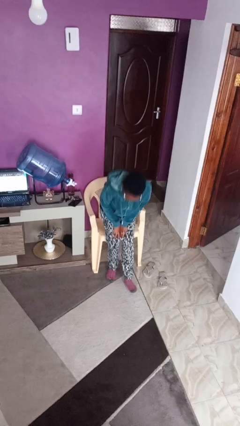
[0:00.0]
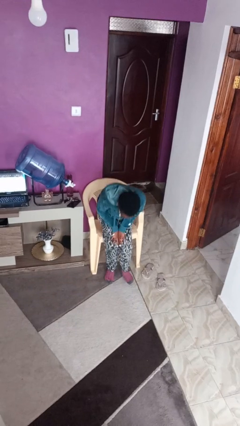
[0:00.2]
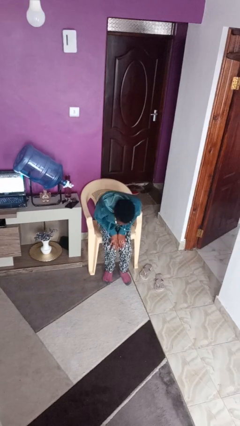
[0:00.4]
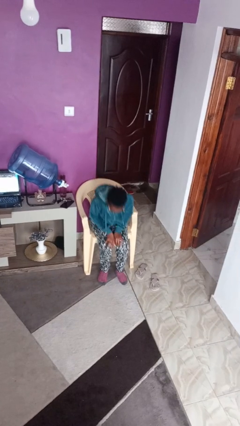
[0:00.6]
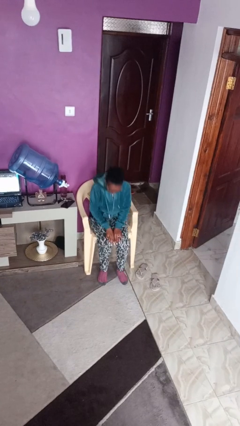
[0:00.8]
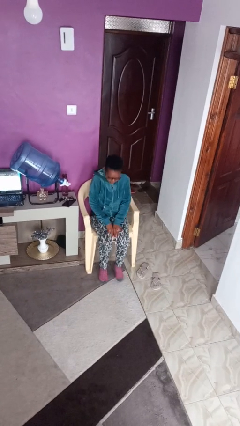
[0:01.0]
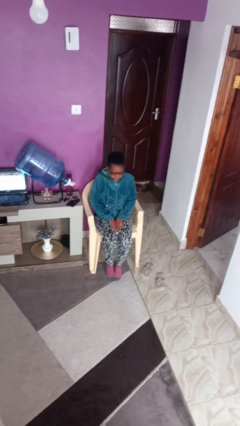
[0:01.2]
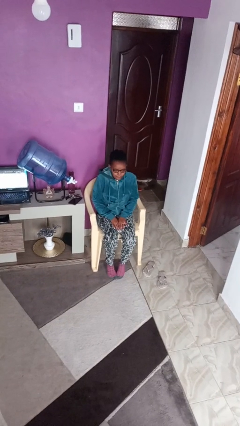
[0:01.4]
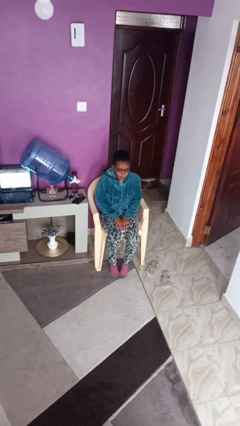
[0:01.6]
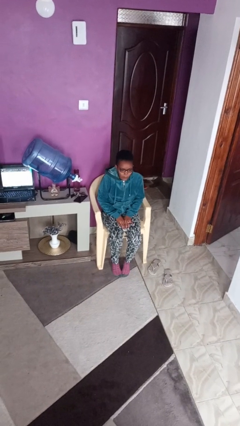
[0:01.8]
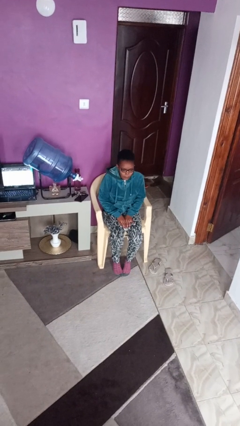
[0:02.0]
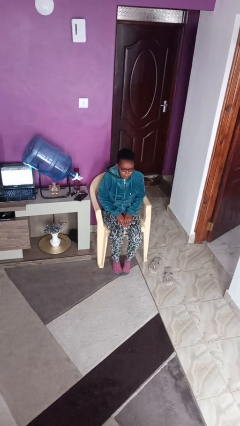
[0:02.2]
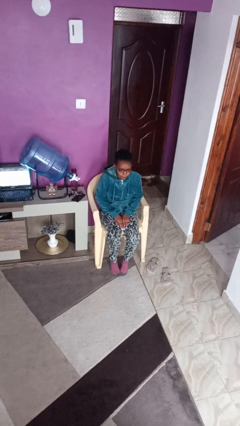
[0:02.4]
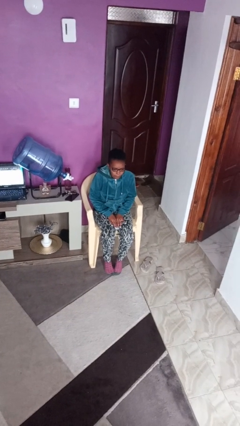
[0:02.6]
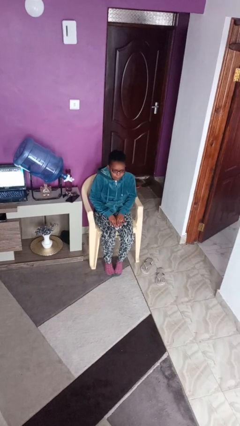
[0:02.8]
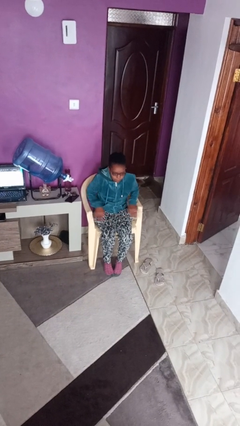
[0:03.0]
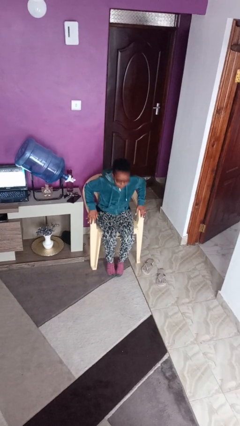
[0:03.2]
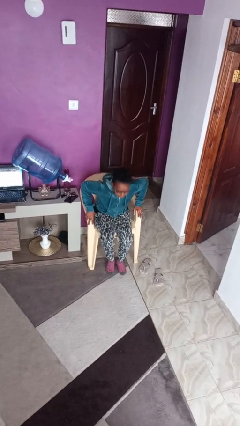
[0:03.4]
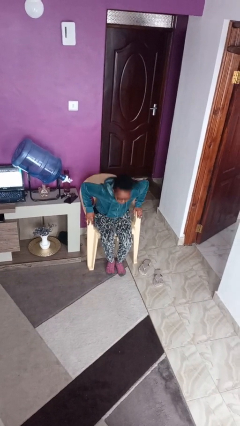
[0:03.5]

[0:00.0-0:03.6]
person sits down

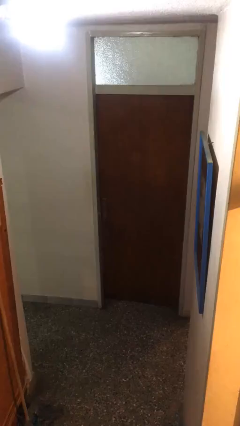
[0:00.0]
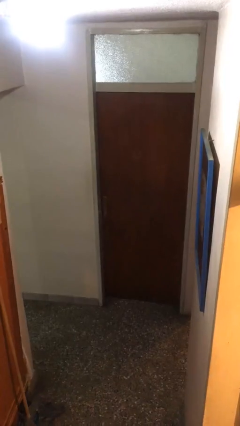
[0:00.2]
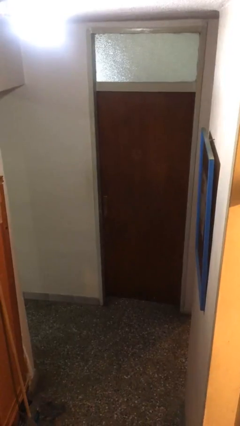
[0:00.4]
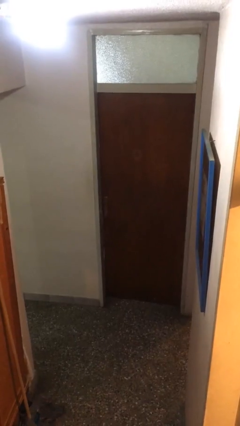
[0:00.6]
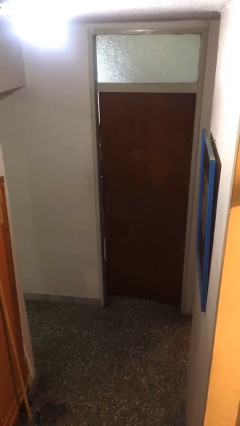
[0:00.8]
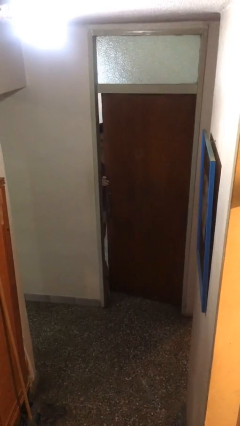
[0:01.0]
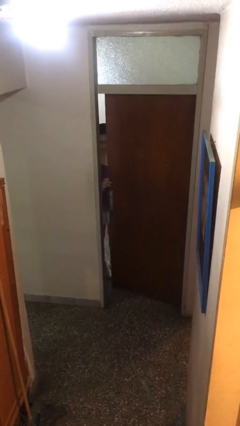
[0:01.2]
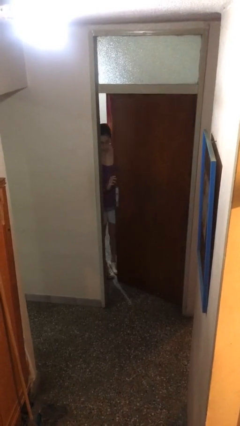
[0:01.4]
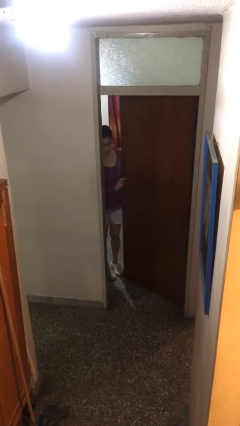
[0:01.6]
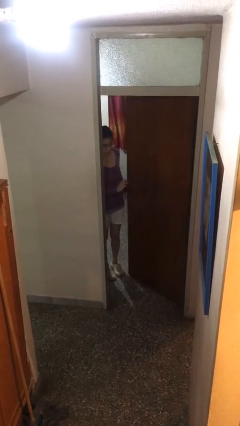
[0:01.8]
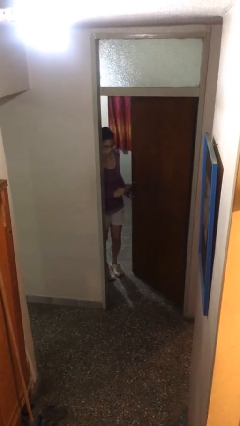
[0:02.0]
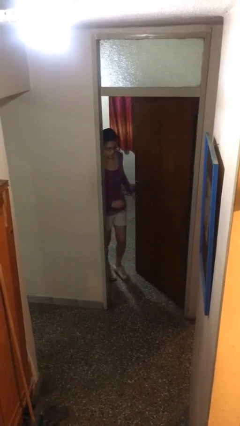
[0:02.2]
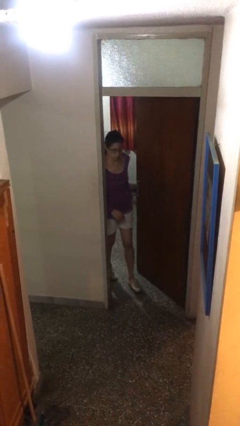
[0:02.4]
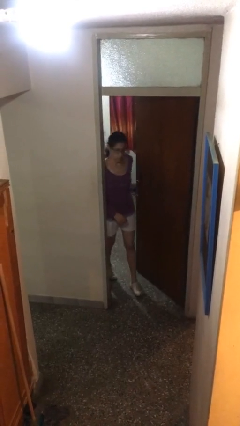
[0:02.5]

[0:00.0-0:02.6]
person opens facility door

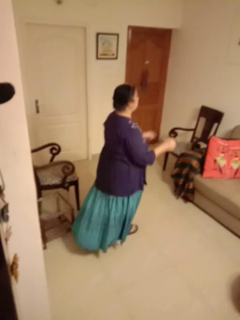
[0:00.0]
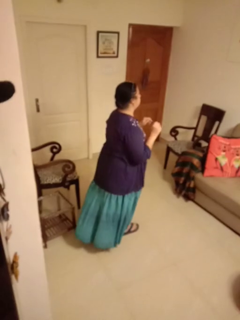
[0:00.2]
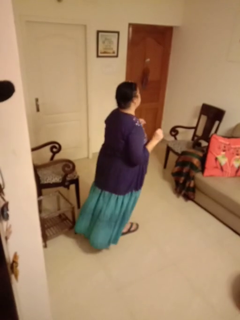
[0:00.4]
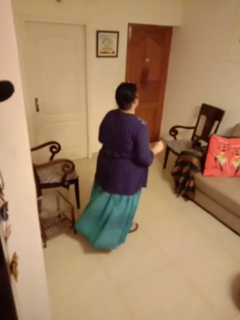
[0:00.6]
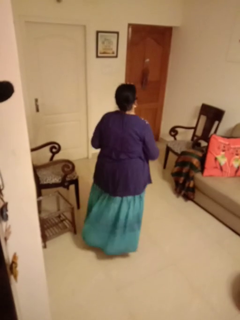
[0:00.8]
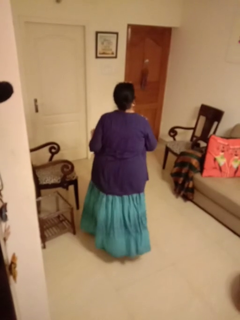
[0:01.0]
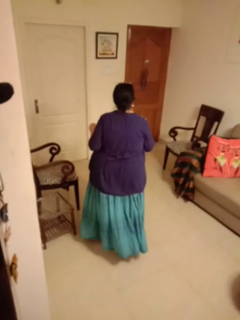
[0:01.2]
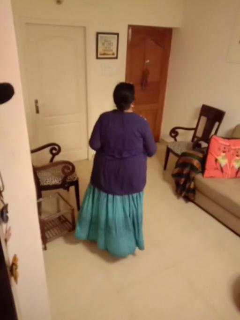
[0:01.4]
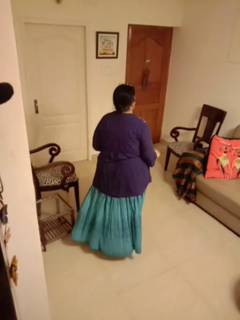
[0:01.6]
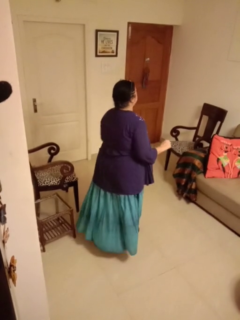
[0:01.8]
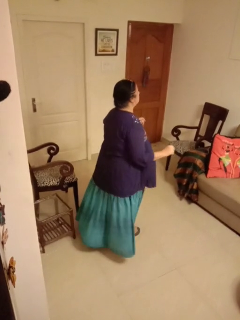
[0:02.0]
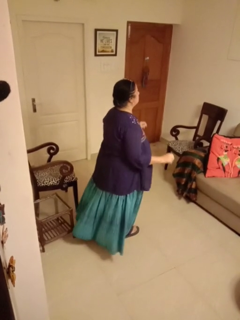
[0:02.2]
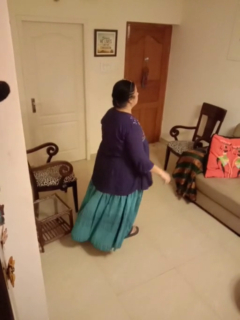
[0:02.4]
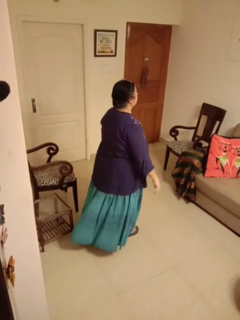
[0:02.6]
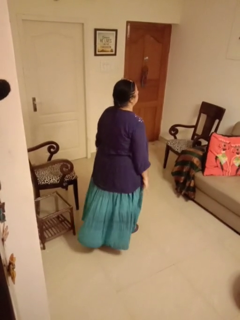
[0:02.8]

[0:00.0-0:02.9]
person dances in place

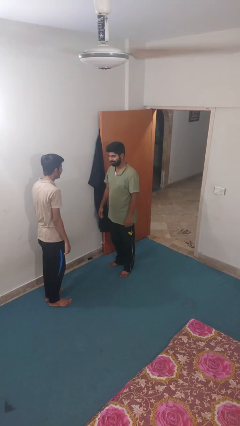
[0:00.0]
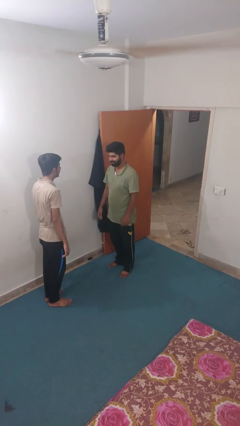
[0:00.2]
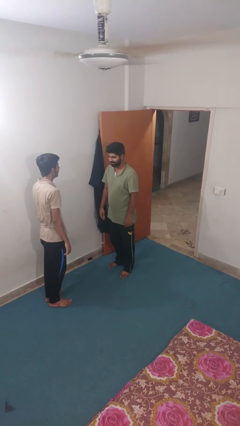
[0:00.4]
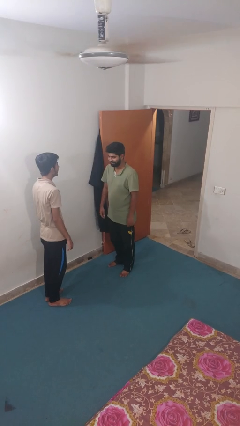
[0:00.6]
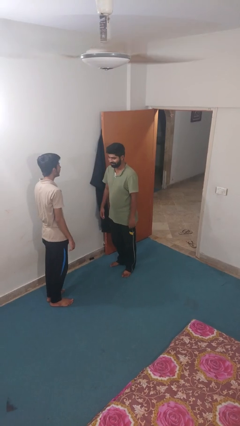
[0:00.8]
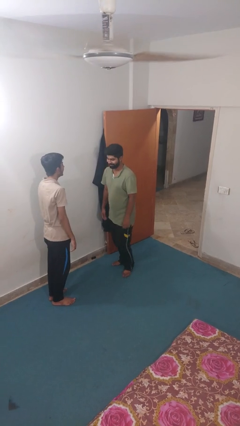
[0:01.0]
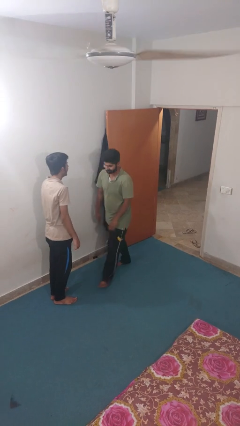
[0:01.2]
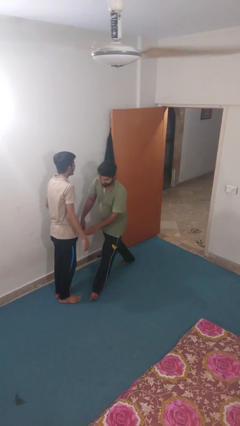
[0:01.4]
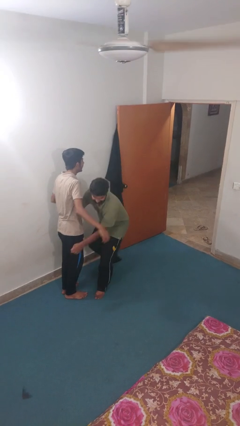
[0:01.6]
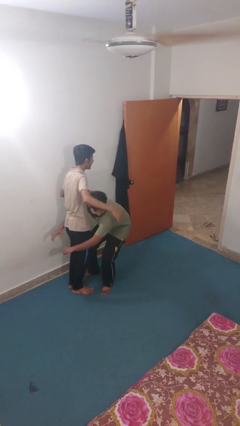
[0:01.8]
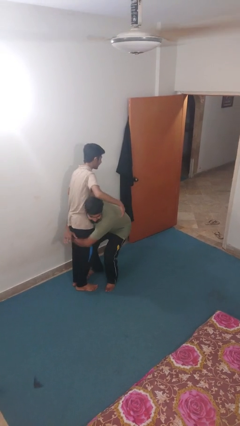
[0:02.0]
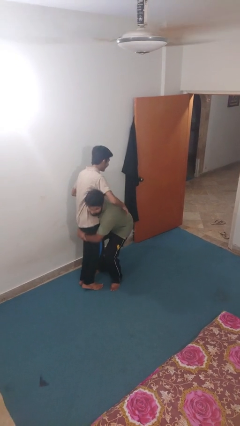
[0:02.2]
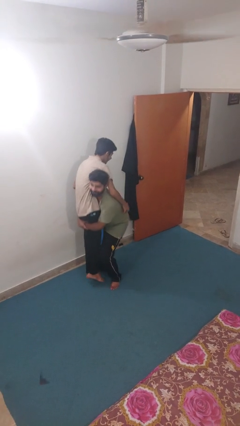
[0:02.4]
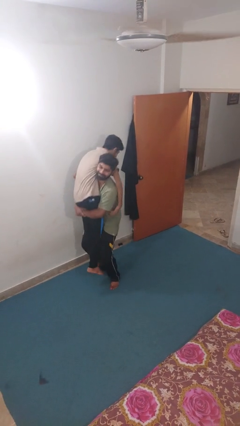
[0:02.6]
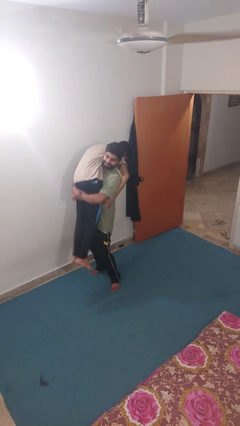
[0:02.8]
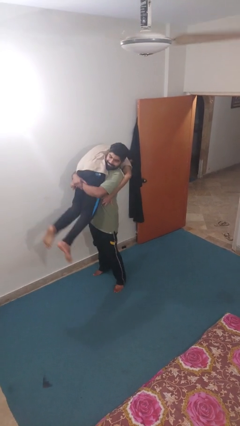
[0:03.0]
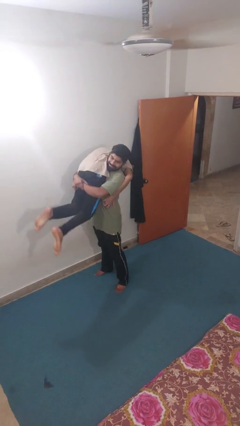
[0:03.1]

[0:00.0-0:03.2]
person carries person over shoulder

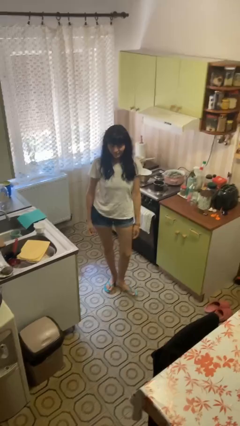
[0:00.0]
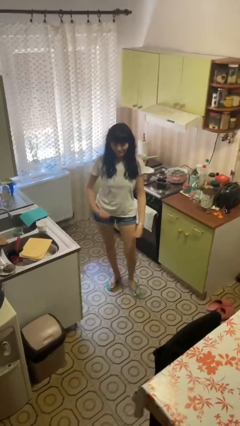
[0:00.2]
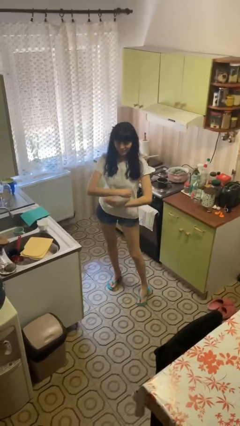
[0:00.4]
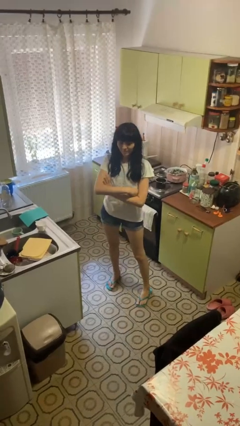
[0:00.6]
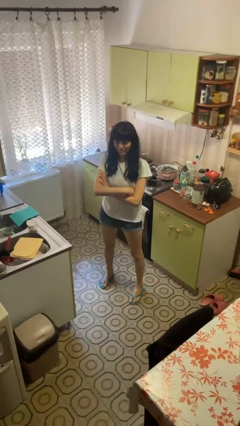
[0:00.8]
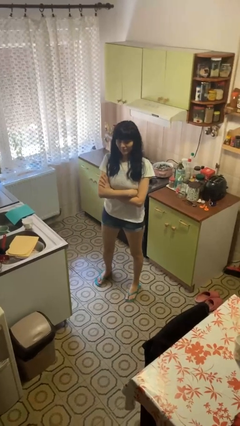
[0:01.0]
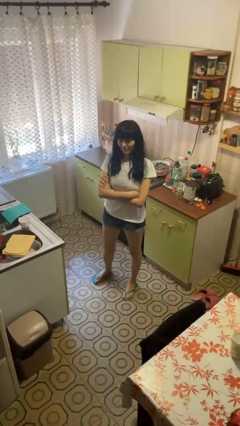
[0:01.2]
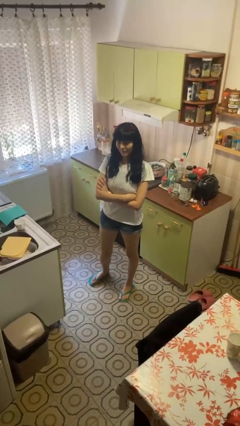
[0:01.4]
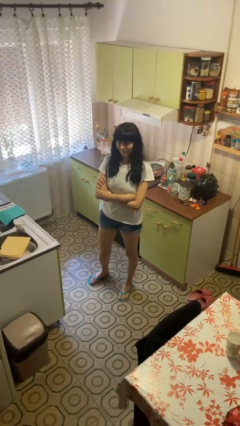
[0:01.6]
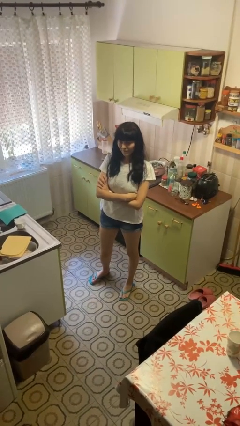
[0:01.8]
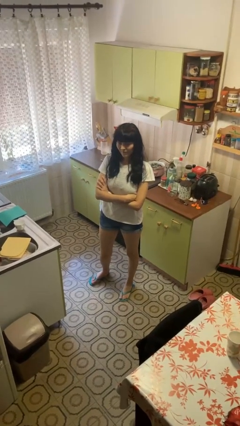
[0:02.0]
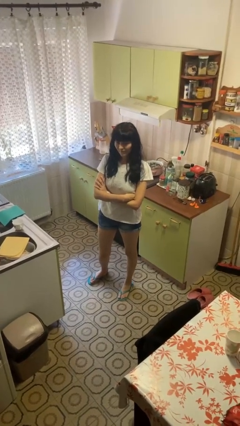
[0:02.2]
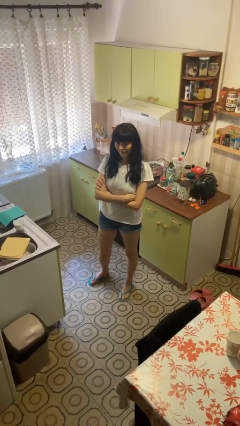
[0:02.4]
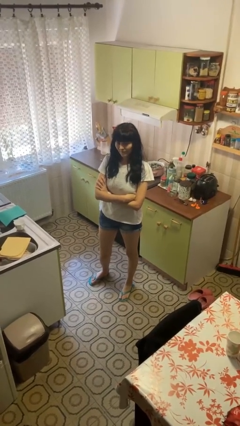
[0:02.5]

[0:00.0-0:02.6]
person crosses arms

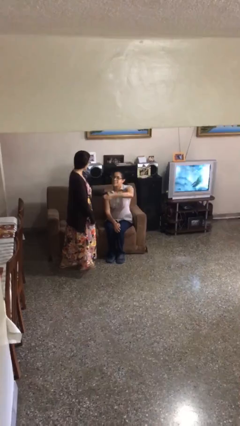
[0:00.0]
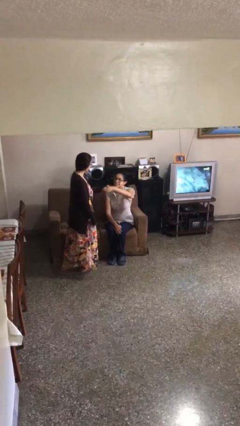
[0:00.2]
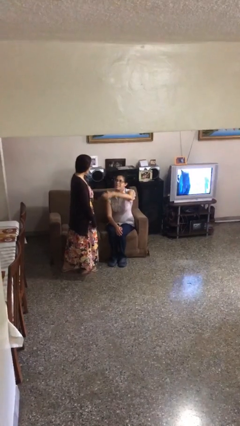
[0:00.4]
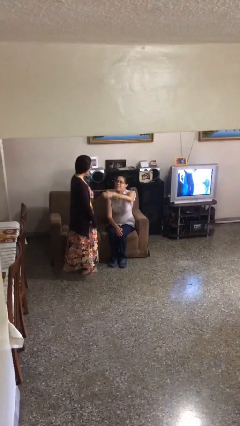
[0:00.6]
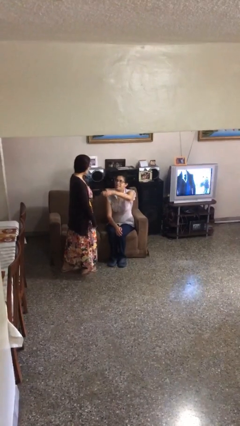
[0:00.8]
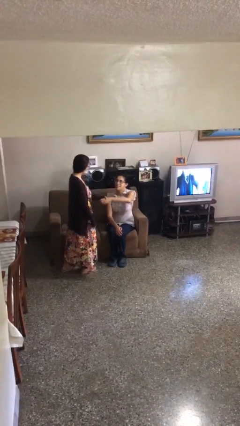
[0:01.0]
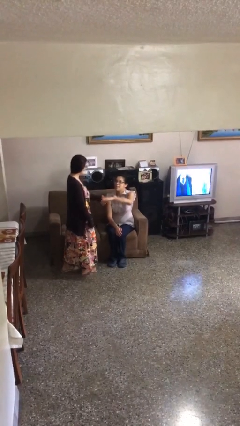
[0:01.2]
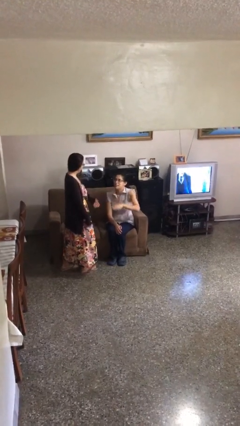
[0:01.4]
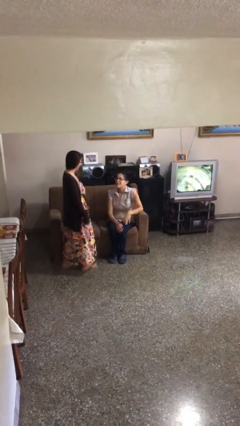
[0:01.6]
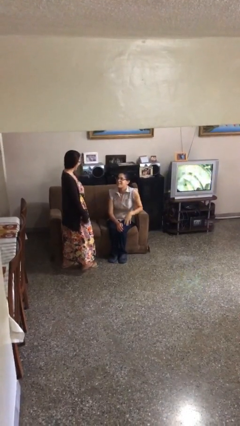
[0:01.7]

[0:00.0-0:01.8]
person shakes hand

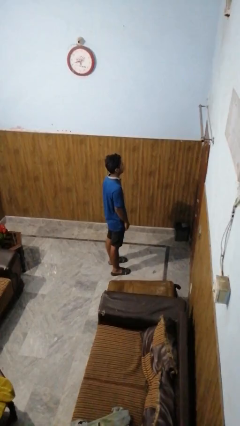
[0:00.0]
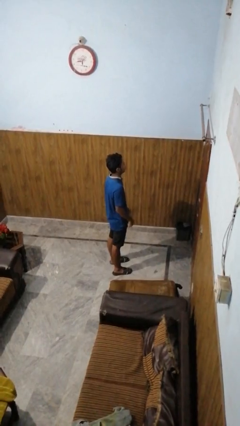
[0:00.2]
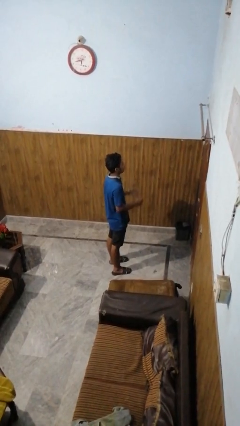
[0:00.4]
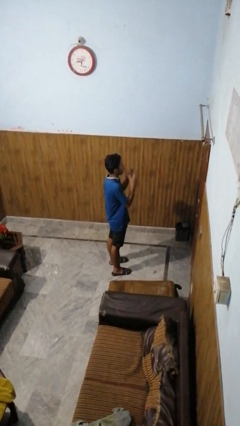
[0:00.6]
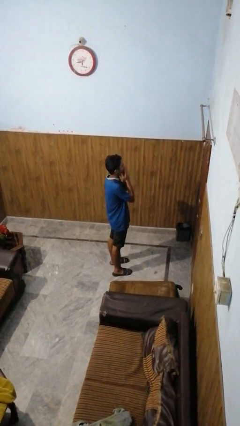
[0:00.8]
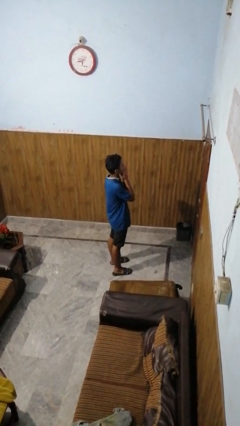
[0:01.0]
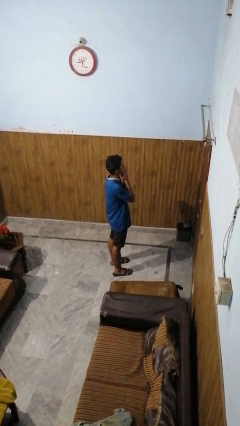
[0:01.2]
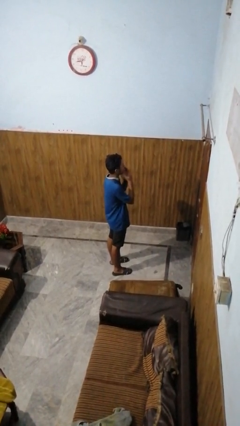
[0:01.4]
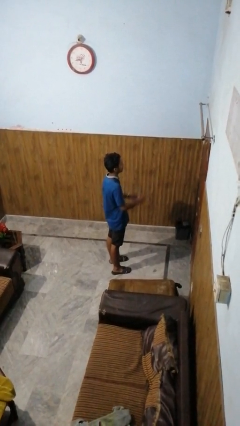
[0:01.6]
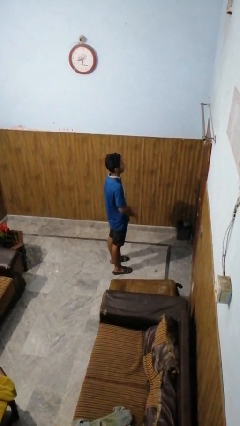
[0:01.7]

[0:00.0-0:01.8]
person covers face with hands
